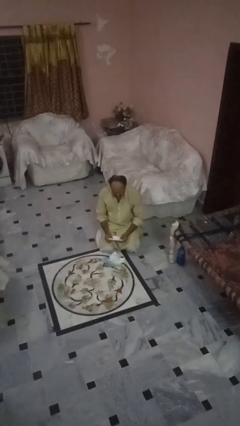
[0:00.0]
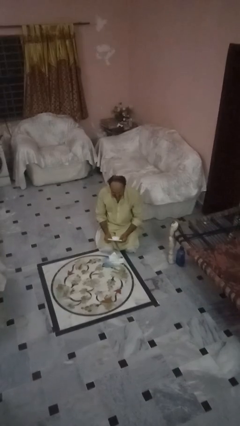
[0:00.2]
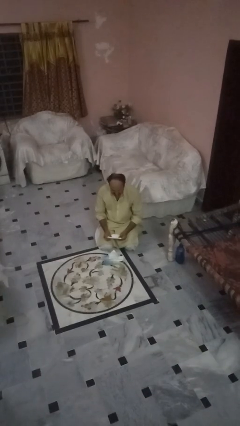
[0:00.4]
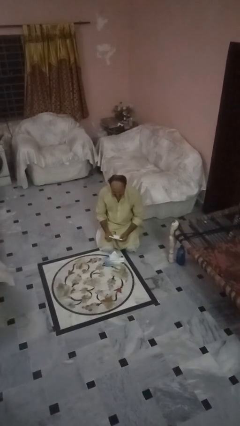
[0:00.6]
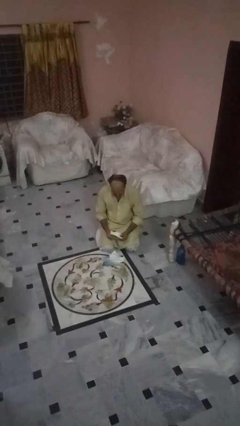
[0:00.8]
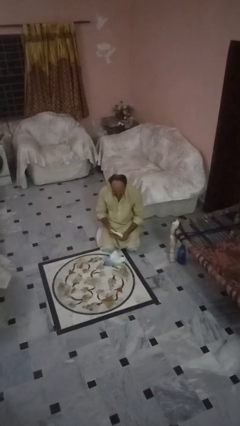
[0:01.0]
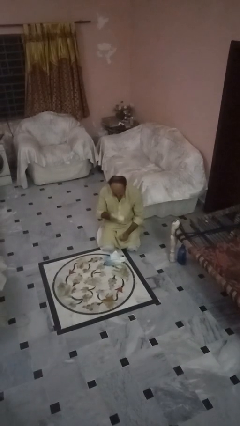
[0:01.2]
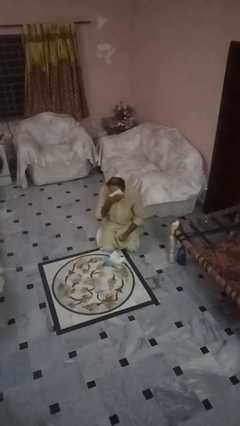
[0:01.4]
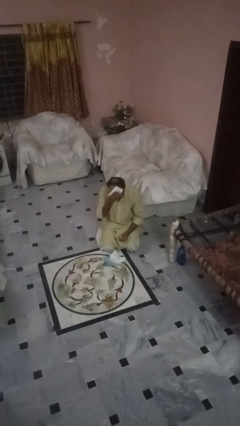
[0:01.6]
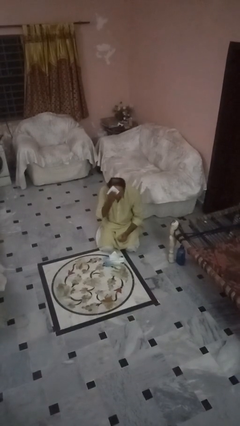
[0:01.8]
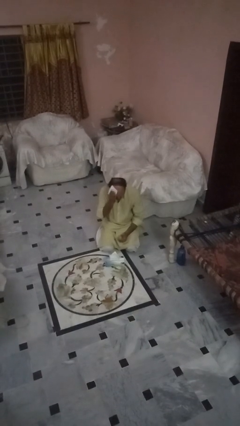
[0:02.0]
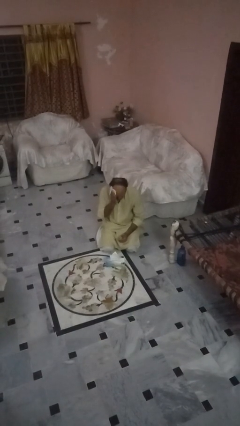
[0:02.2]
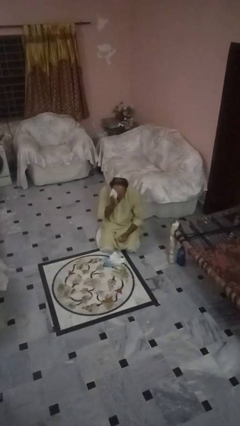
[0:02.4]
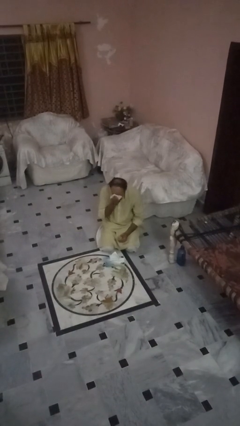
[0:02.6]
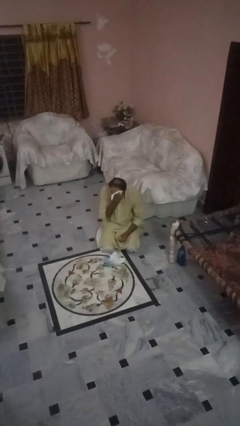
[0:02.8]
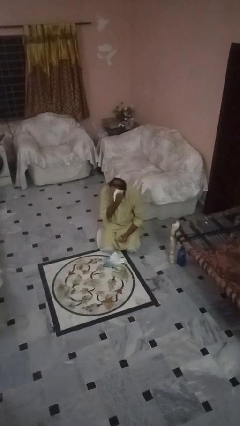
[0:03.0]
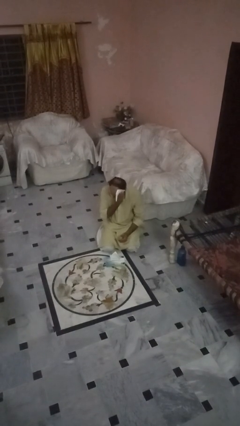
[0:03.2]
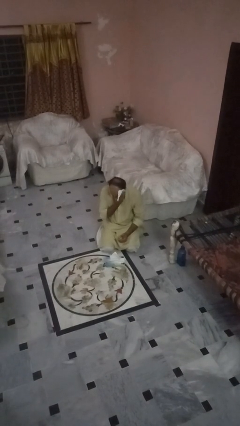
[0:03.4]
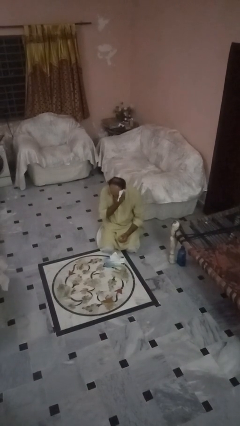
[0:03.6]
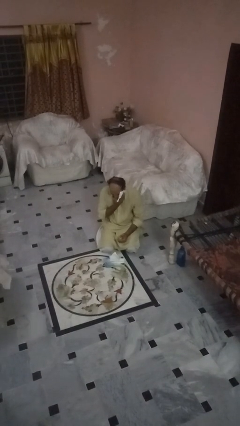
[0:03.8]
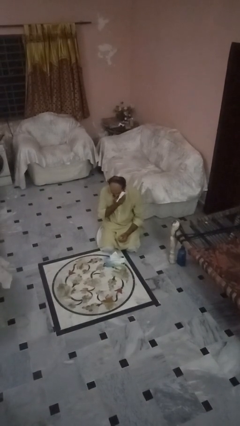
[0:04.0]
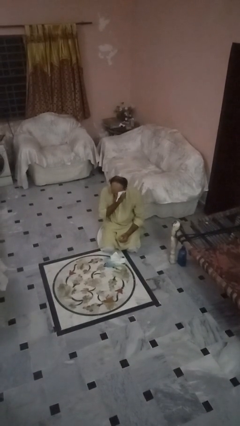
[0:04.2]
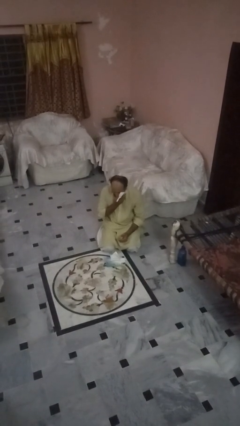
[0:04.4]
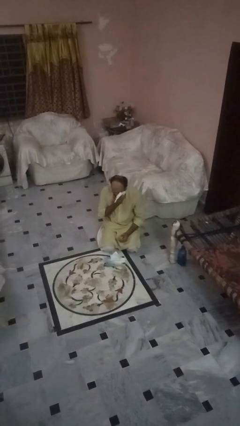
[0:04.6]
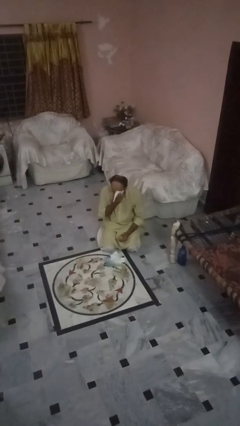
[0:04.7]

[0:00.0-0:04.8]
person wipes mouth with napkin

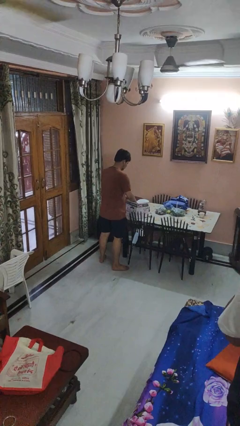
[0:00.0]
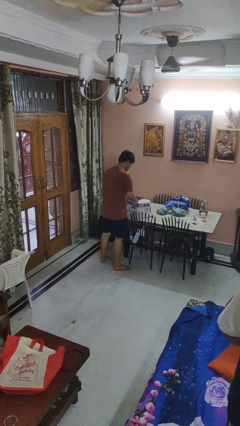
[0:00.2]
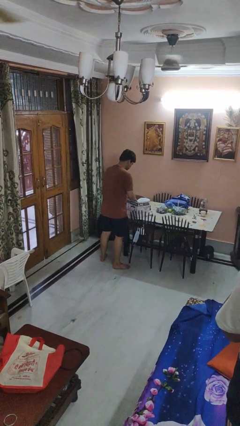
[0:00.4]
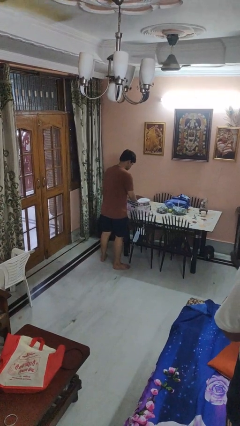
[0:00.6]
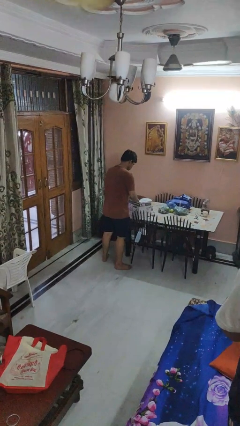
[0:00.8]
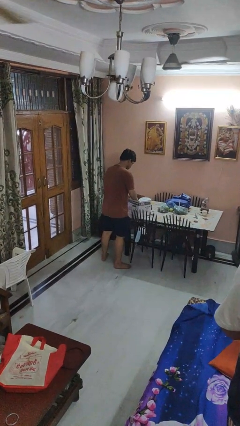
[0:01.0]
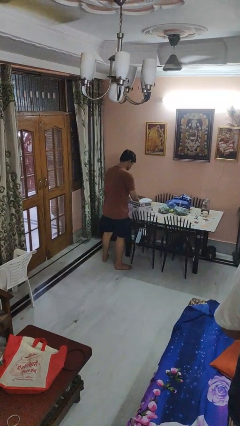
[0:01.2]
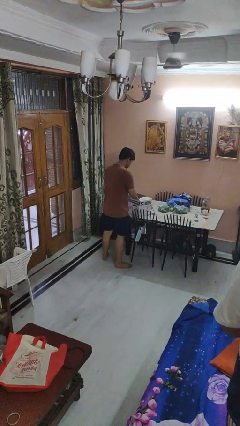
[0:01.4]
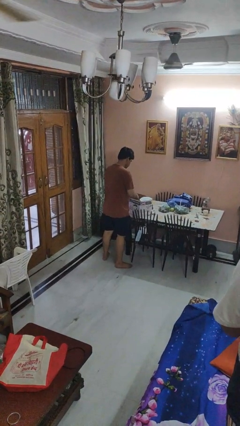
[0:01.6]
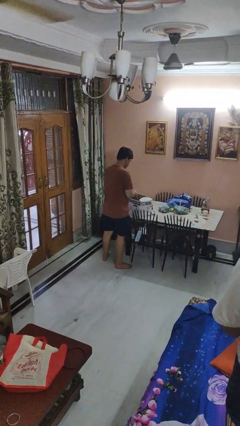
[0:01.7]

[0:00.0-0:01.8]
person searches in box

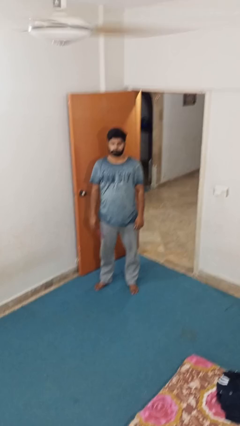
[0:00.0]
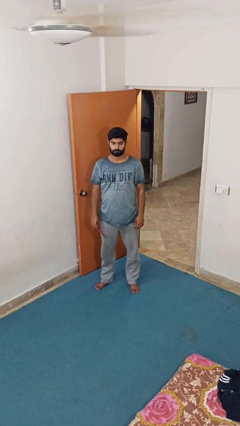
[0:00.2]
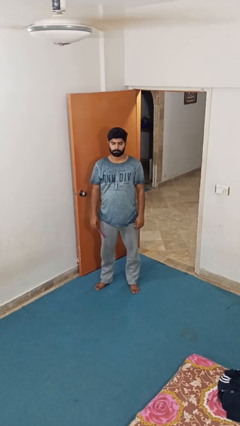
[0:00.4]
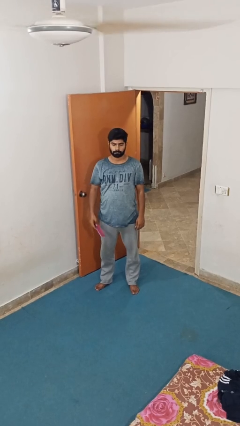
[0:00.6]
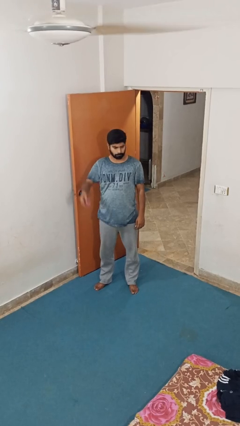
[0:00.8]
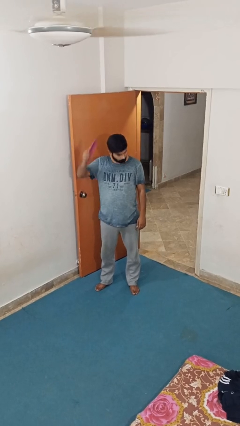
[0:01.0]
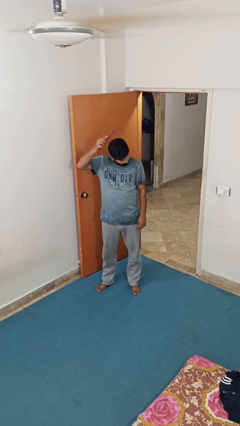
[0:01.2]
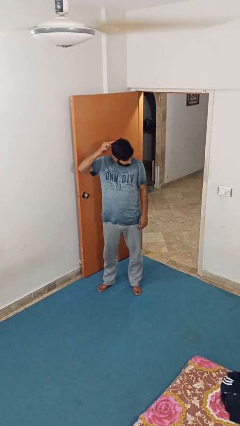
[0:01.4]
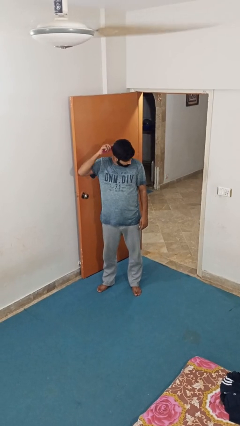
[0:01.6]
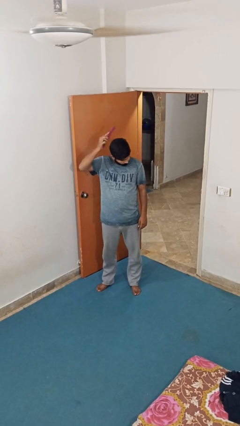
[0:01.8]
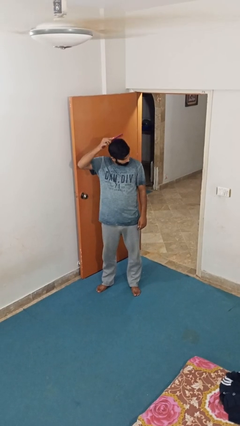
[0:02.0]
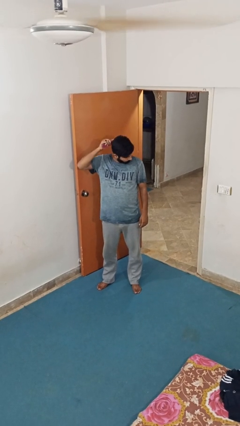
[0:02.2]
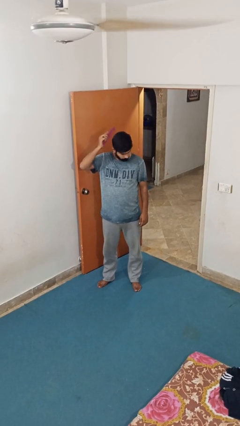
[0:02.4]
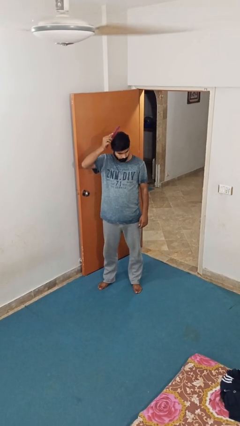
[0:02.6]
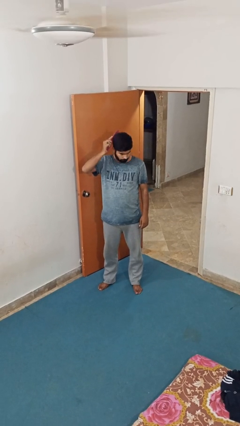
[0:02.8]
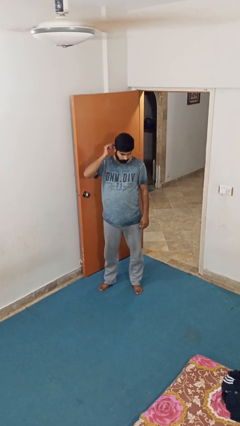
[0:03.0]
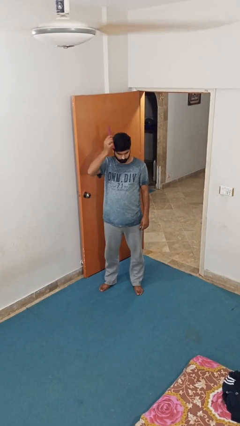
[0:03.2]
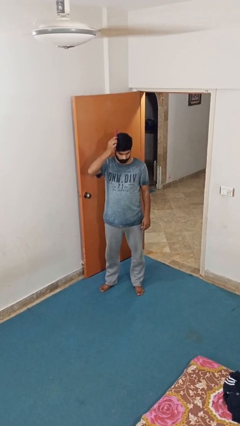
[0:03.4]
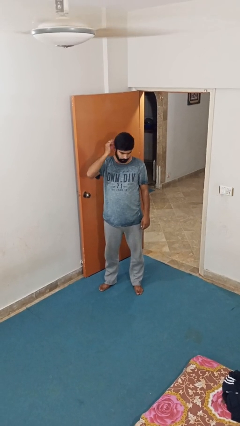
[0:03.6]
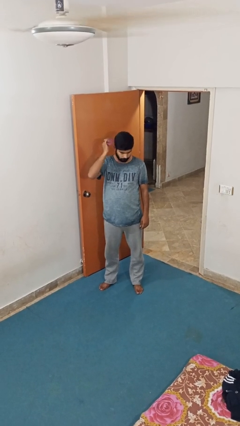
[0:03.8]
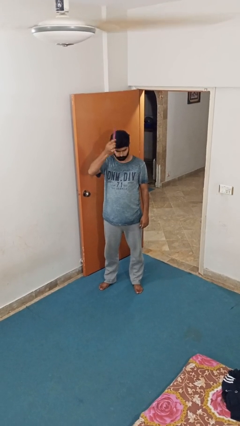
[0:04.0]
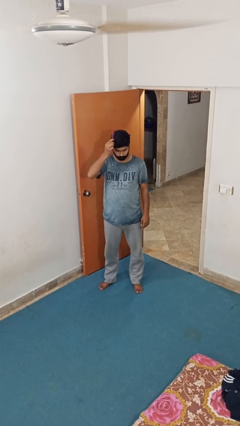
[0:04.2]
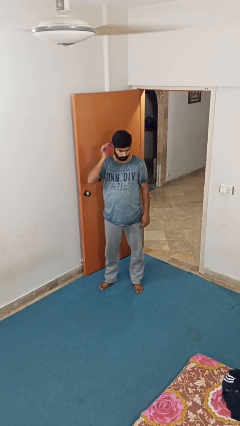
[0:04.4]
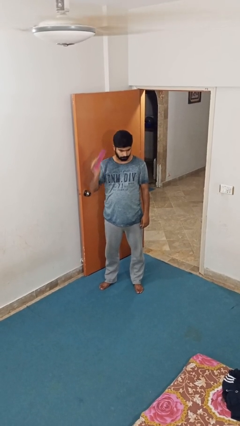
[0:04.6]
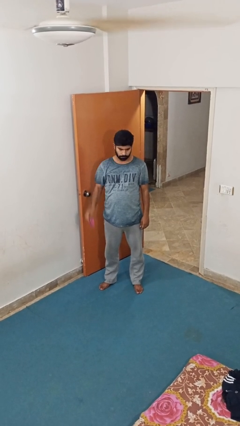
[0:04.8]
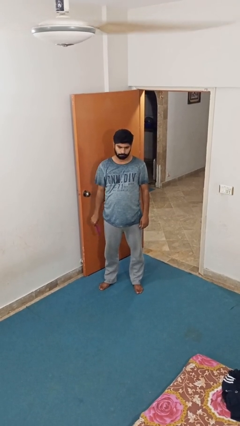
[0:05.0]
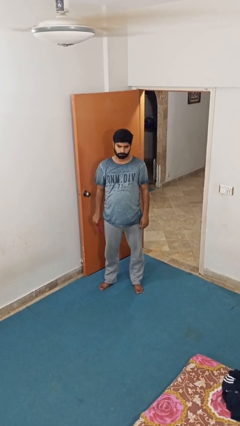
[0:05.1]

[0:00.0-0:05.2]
person brushes hair

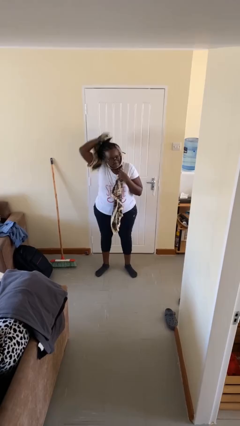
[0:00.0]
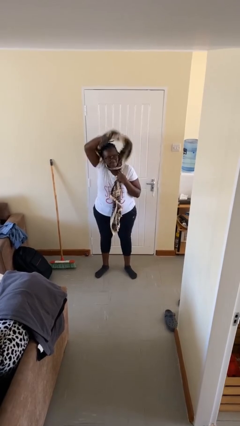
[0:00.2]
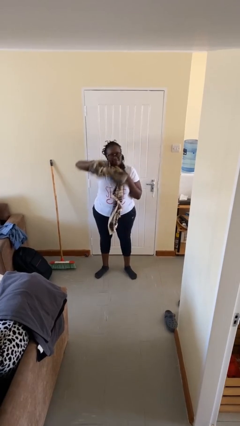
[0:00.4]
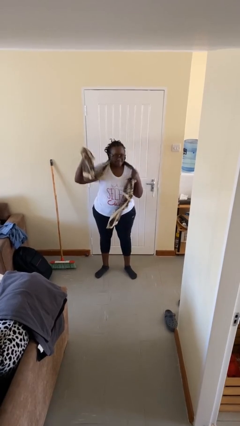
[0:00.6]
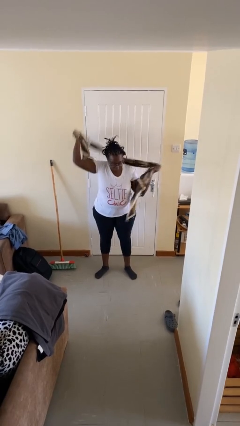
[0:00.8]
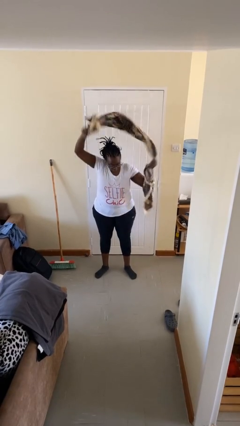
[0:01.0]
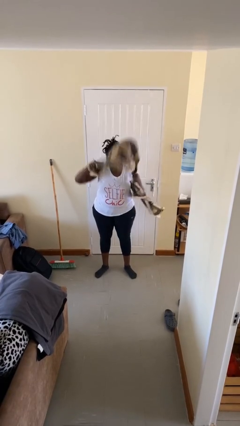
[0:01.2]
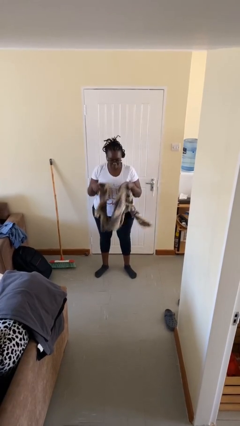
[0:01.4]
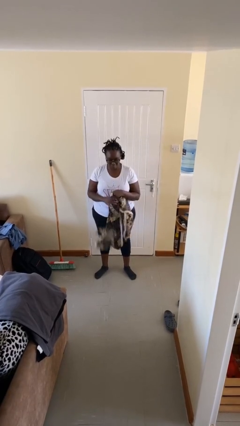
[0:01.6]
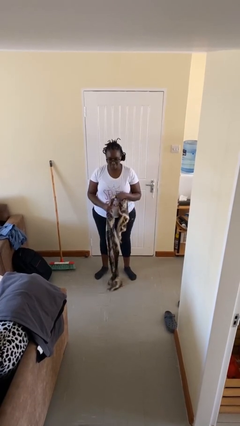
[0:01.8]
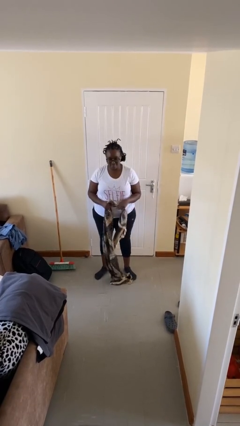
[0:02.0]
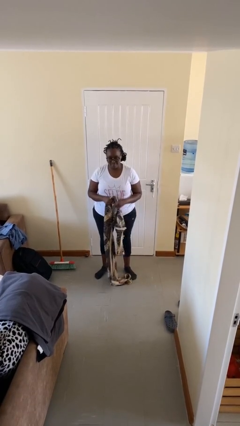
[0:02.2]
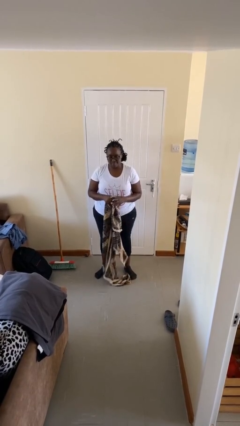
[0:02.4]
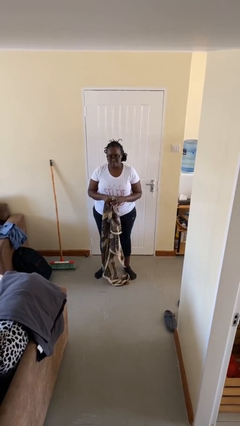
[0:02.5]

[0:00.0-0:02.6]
person takes off scarf

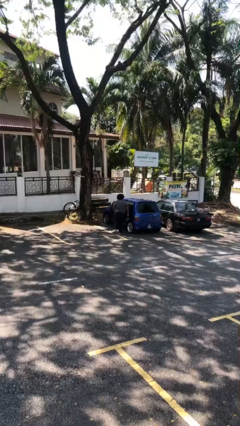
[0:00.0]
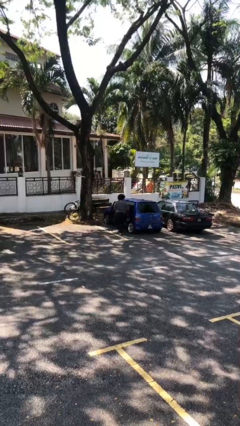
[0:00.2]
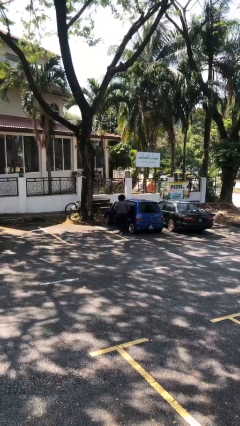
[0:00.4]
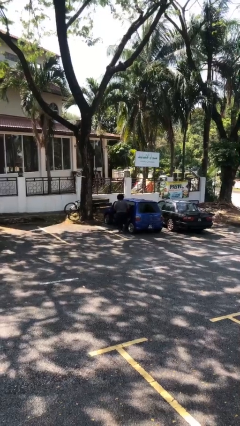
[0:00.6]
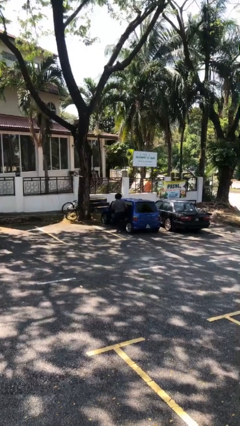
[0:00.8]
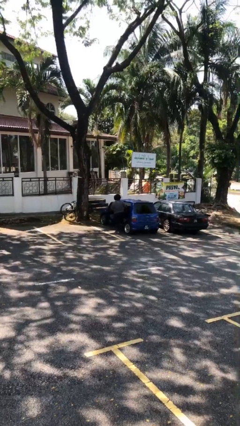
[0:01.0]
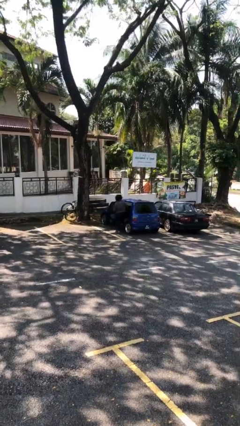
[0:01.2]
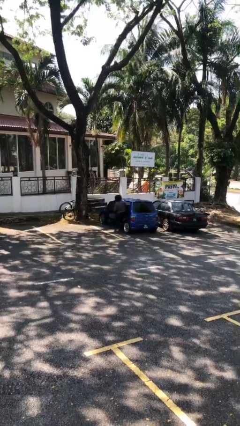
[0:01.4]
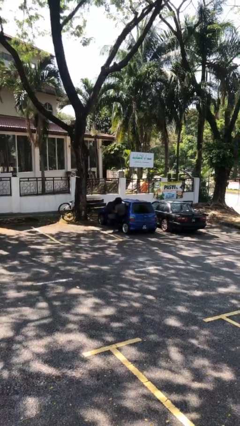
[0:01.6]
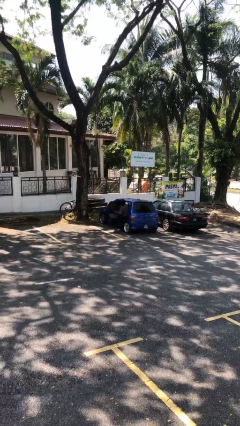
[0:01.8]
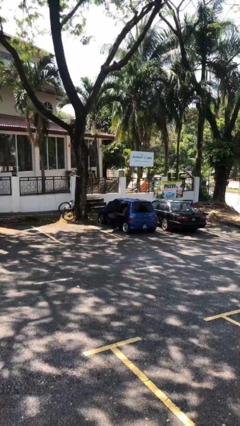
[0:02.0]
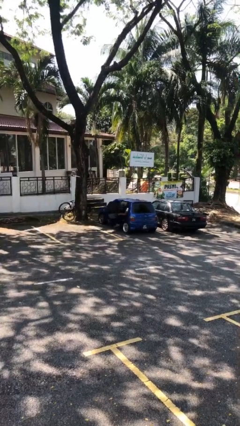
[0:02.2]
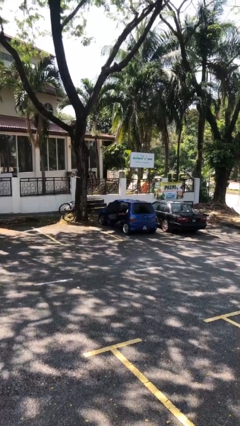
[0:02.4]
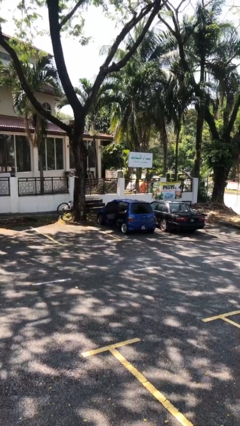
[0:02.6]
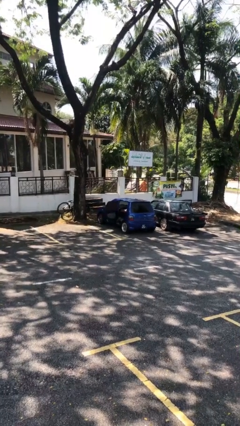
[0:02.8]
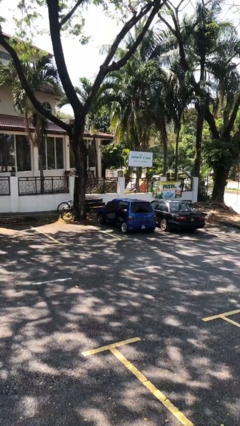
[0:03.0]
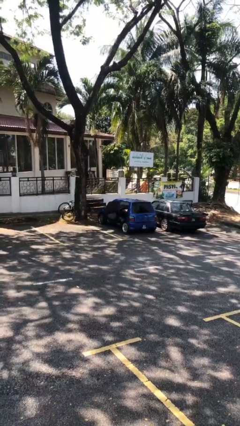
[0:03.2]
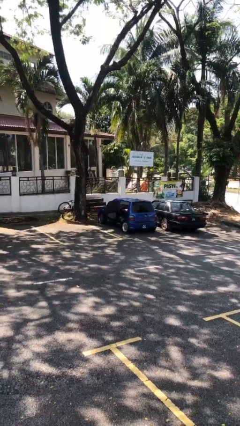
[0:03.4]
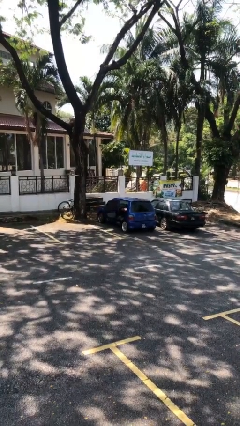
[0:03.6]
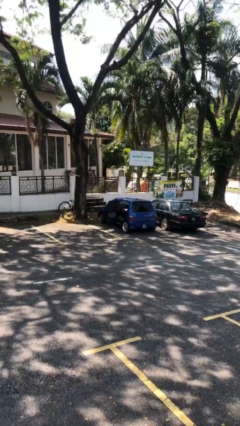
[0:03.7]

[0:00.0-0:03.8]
person enters car
